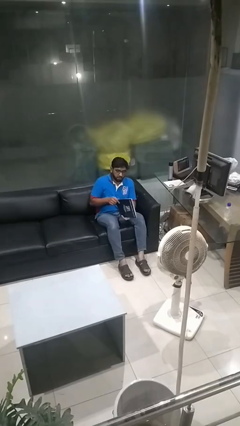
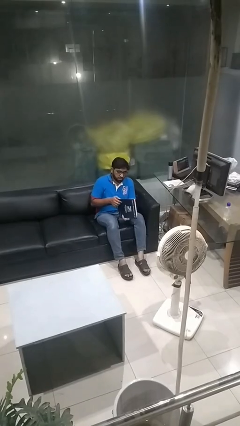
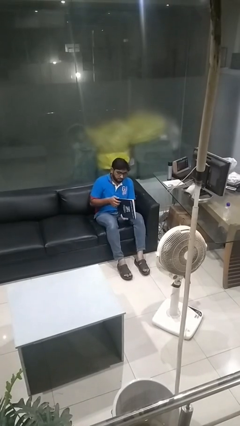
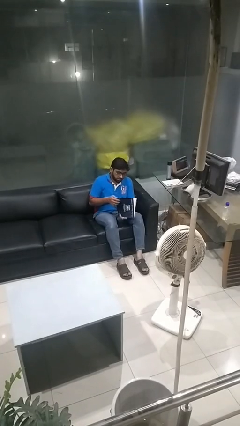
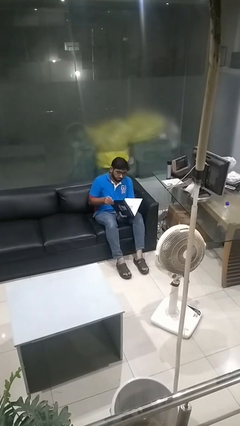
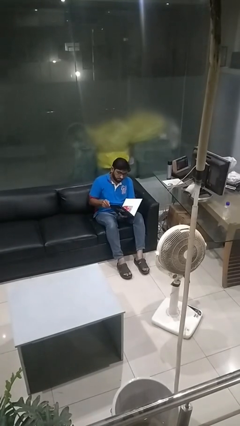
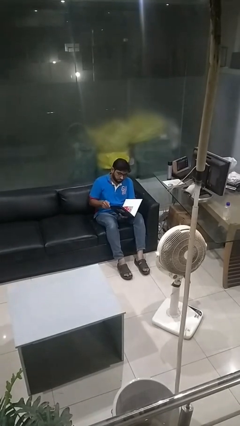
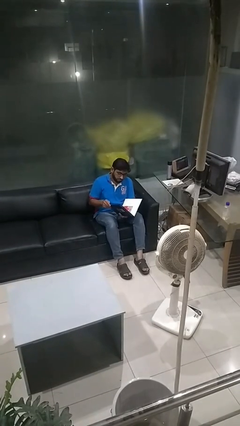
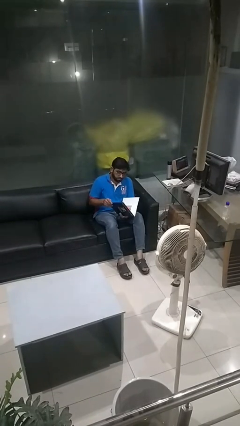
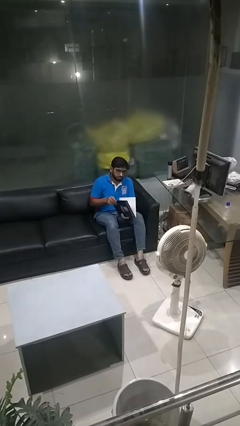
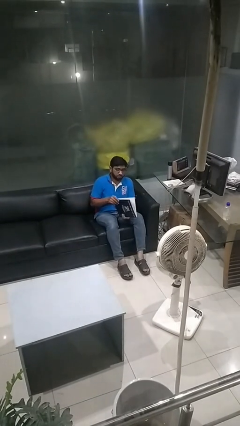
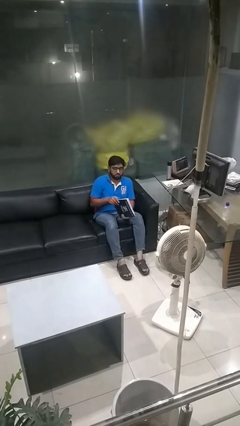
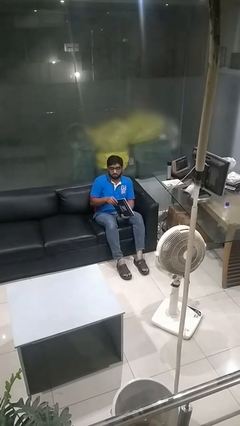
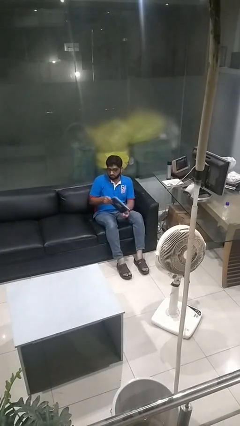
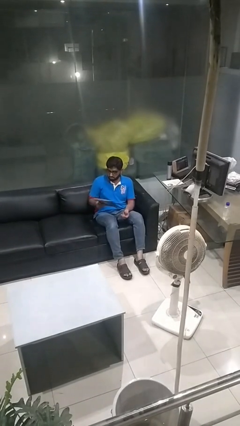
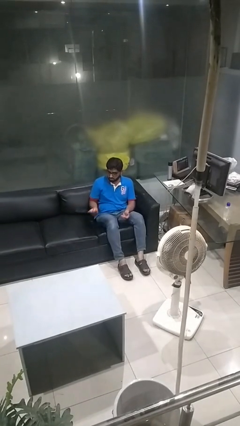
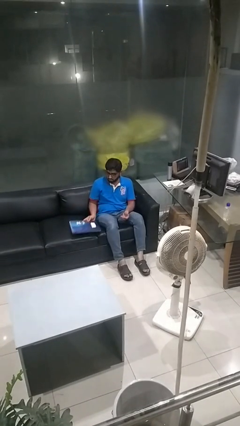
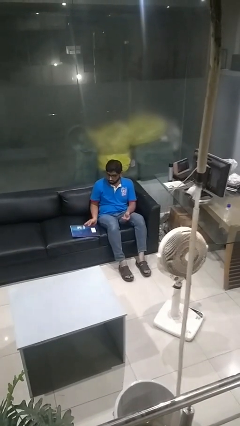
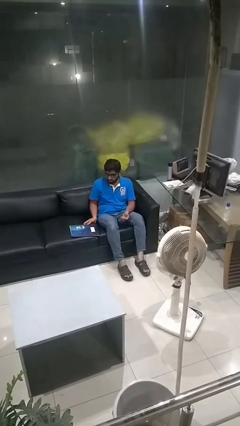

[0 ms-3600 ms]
person reads magazine

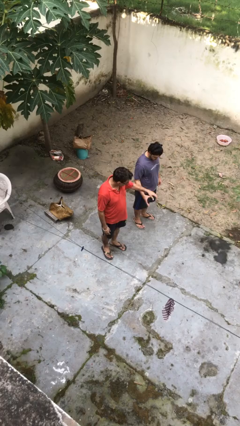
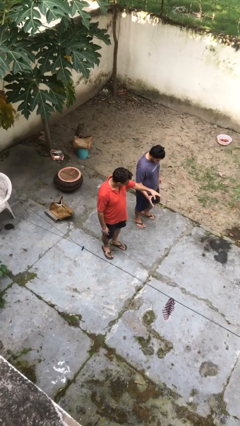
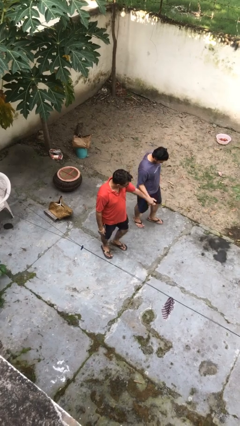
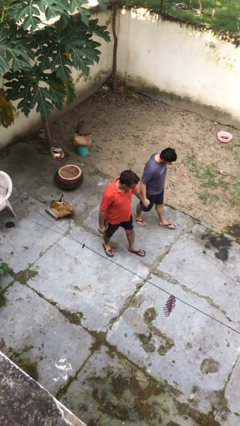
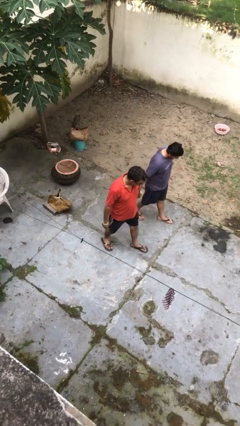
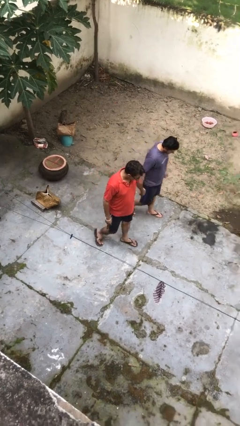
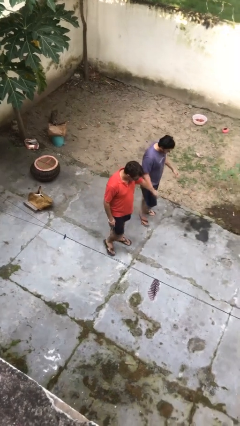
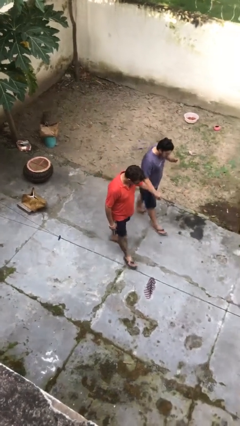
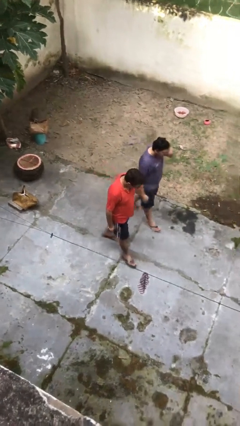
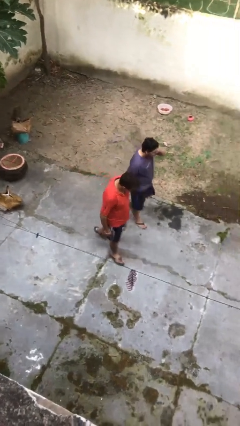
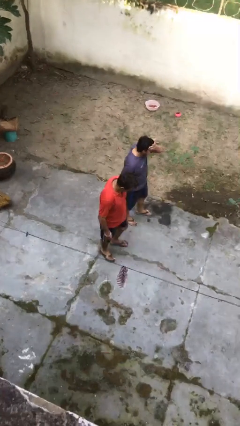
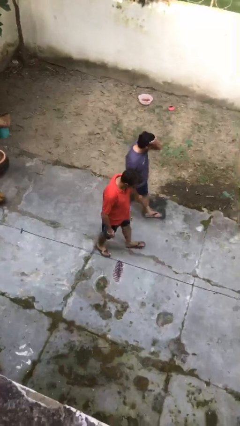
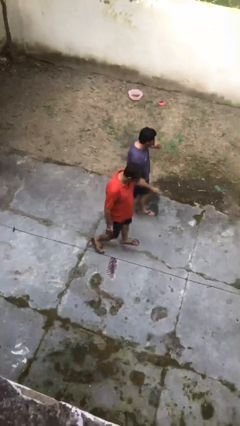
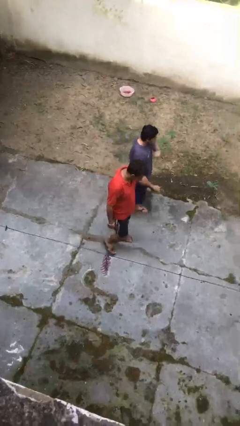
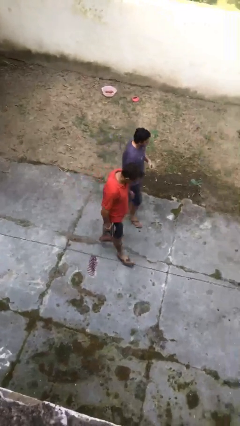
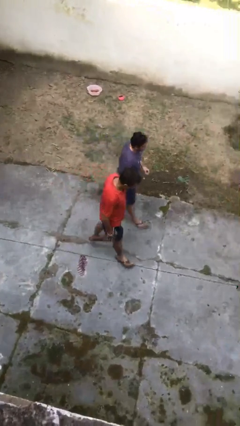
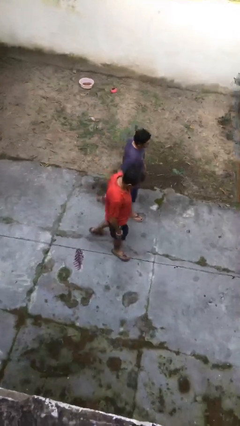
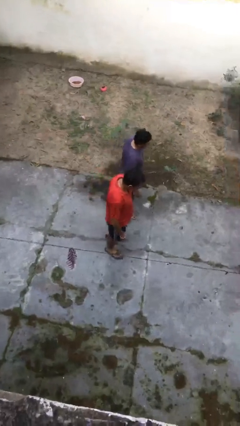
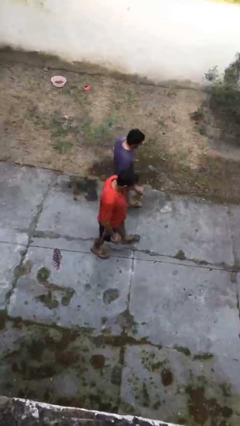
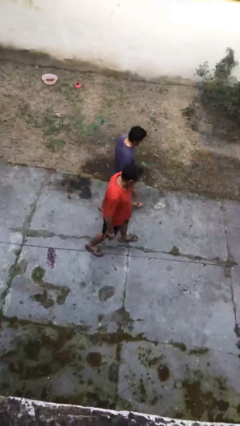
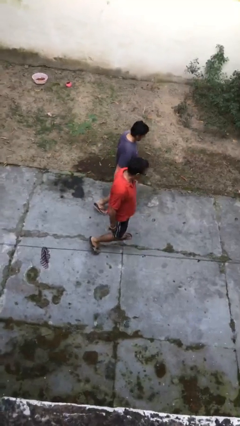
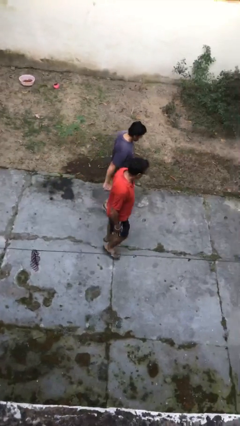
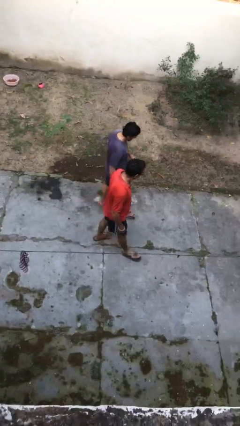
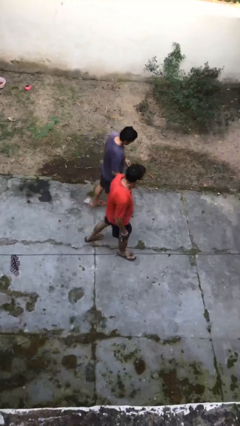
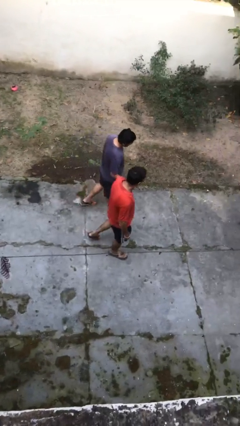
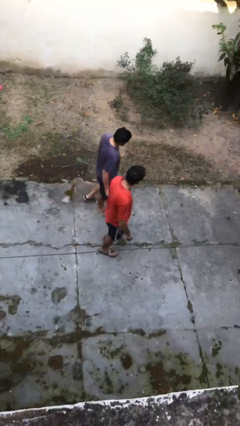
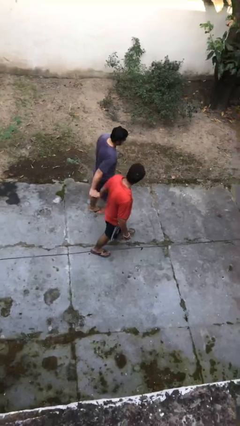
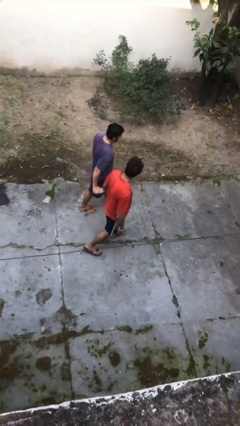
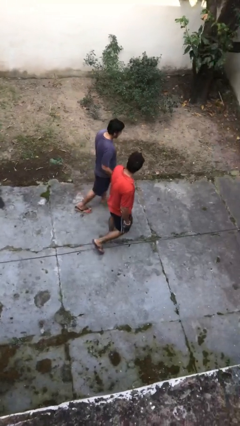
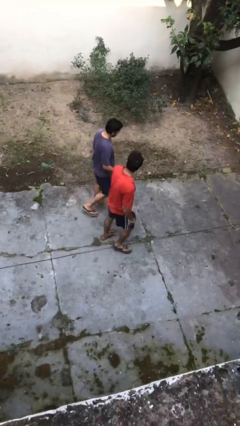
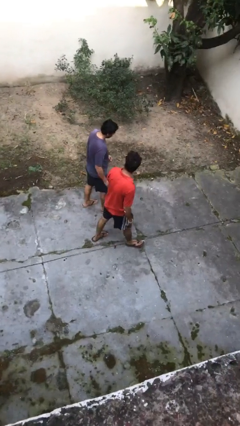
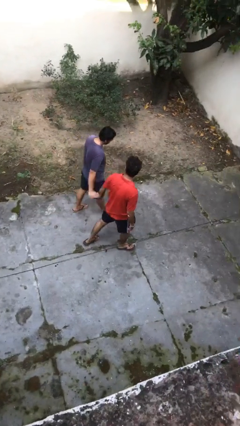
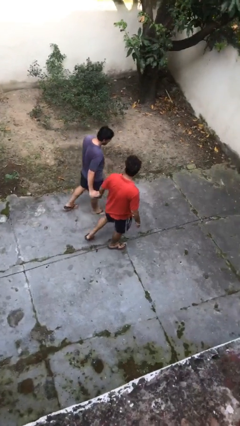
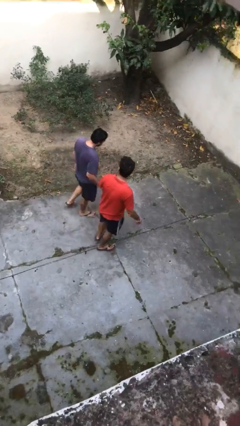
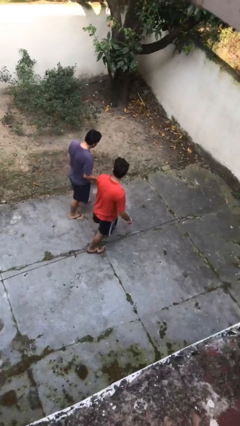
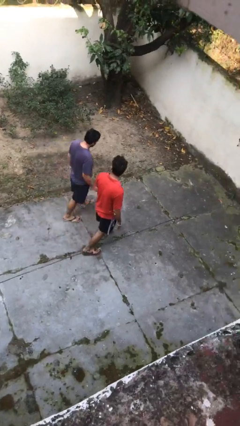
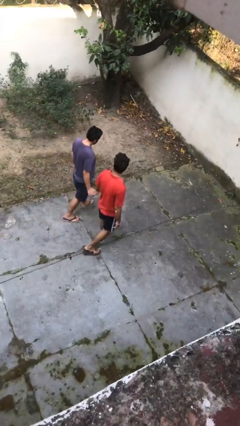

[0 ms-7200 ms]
person holds hand

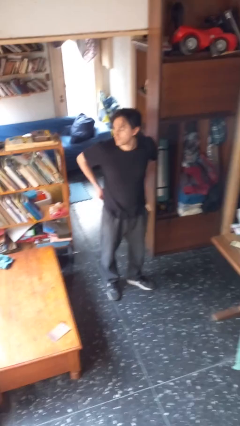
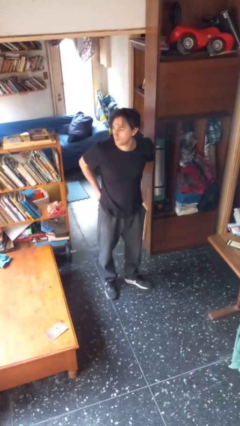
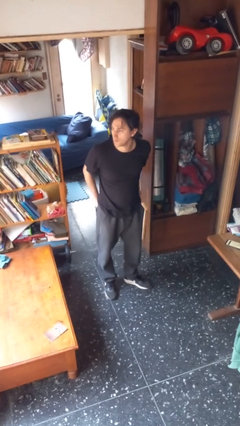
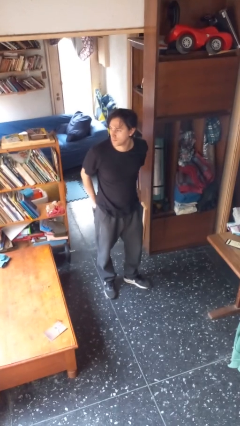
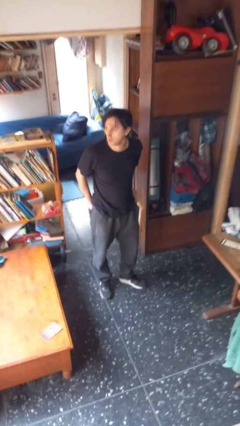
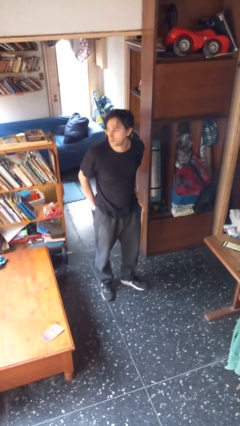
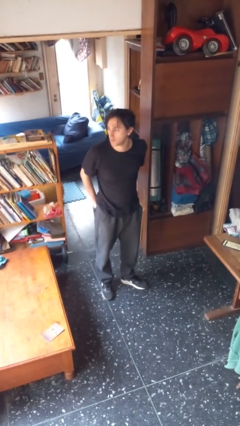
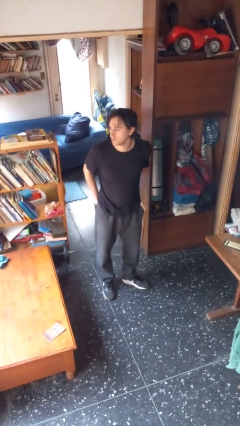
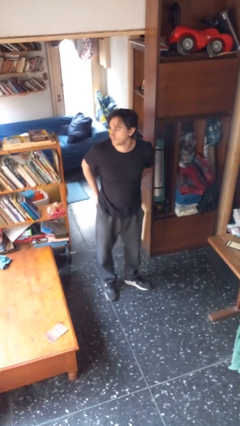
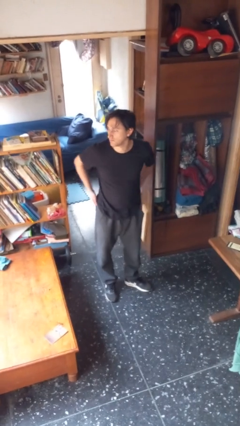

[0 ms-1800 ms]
person puts hands in back pockets

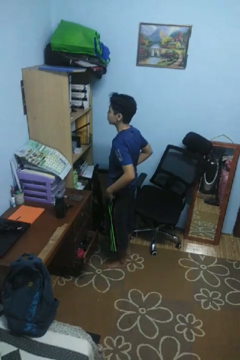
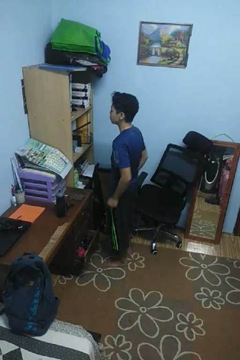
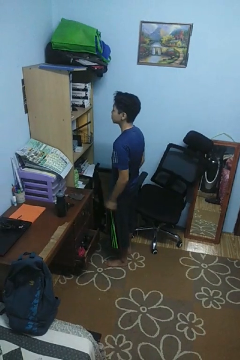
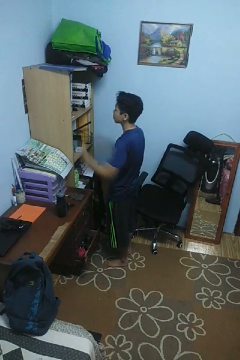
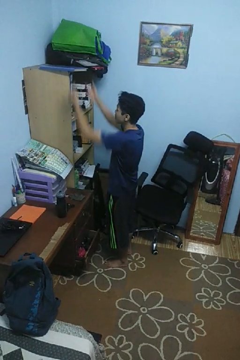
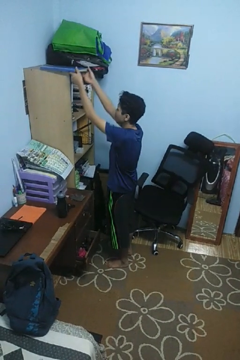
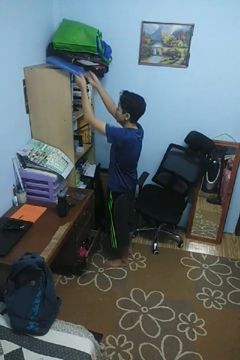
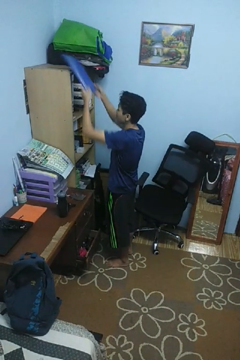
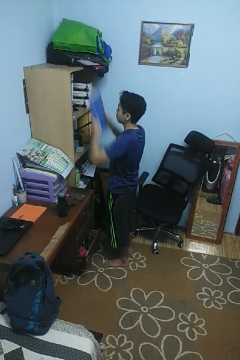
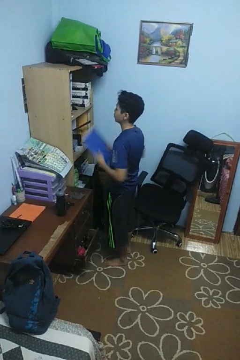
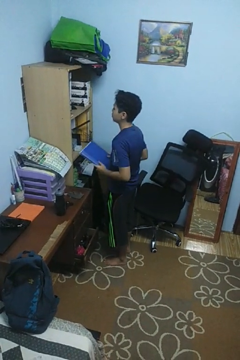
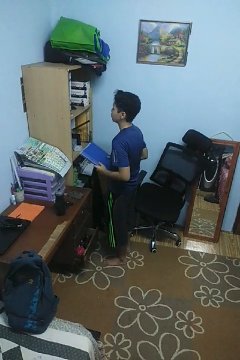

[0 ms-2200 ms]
person picks up object from shelf

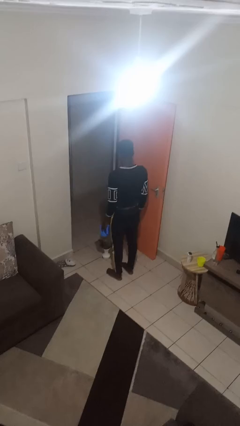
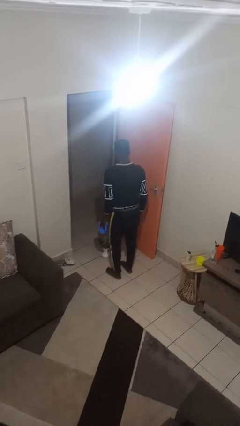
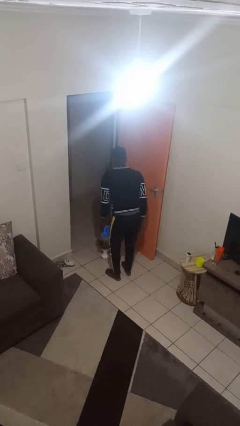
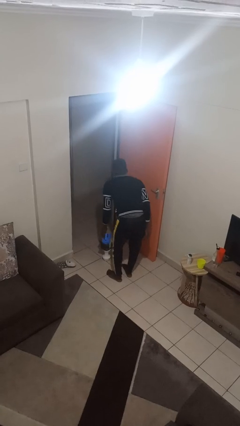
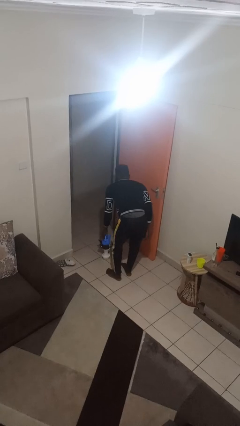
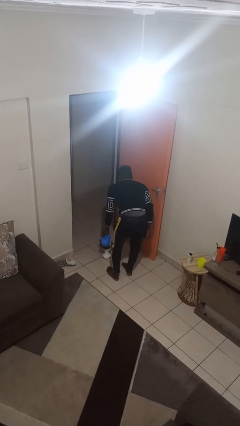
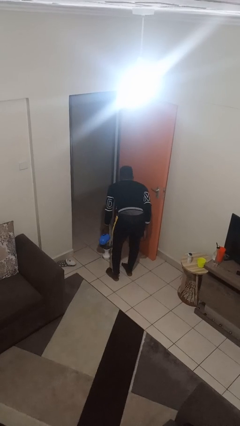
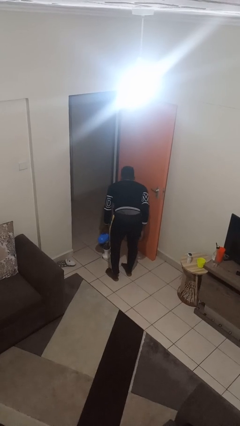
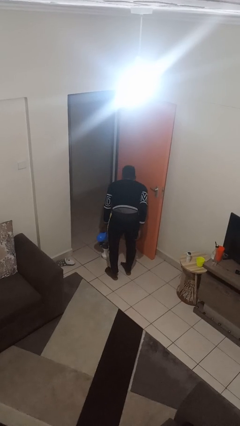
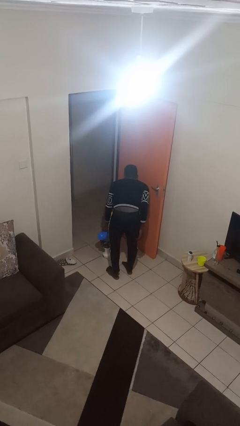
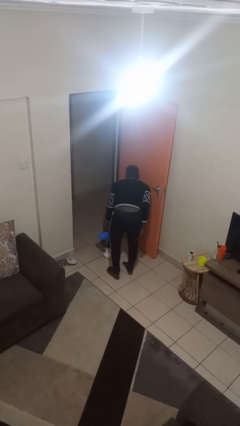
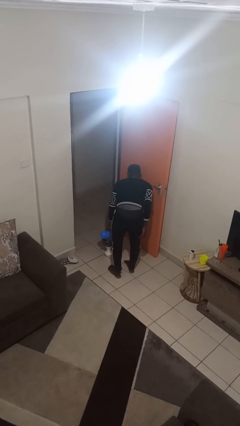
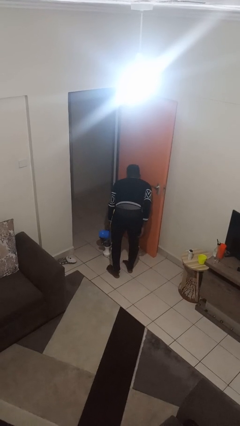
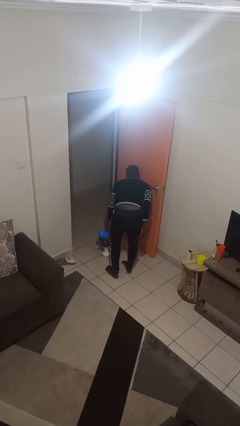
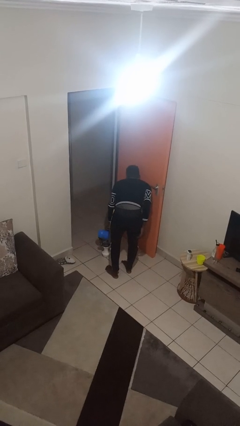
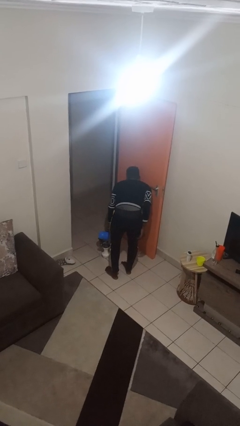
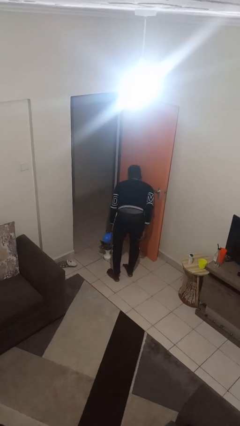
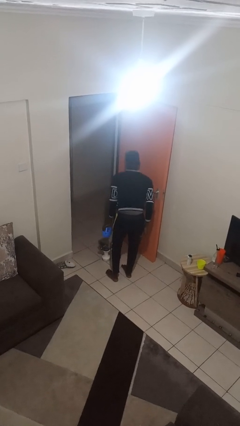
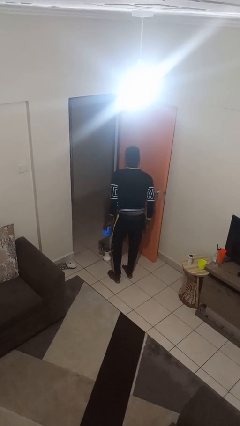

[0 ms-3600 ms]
person waters houseplant
